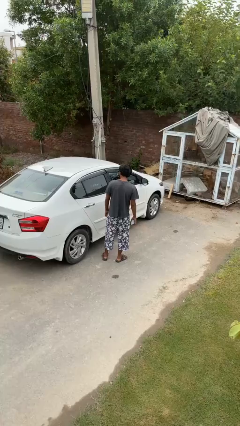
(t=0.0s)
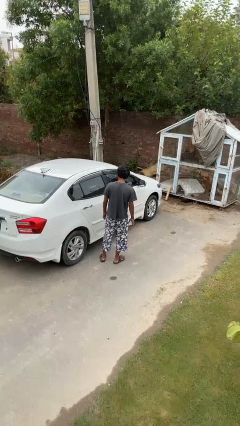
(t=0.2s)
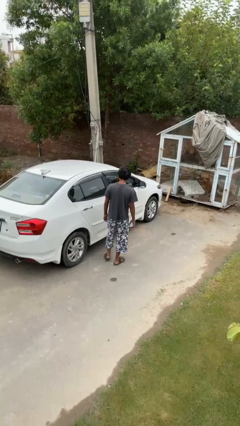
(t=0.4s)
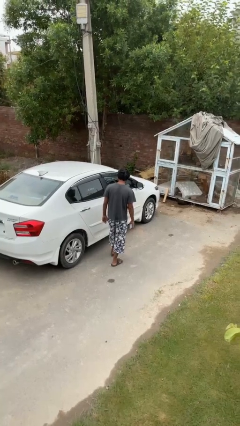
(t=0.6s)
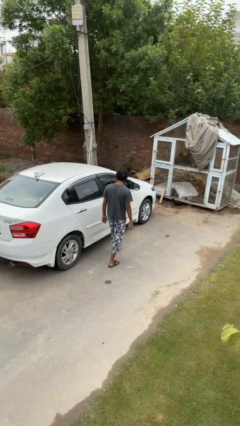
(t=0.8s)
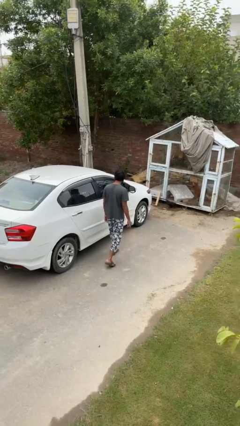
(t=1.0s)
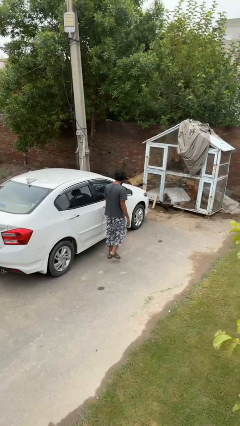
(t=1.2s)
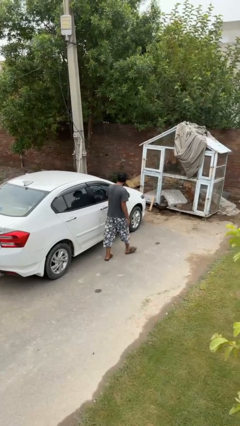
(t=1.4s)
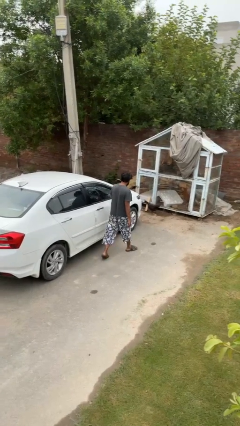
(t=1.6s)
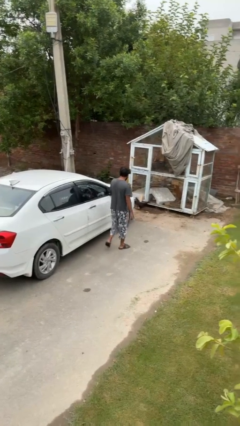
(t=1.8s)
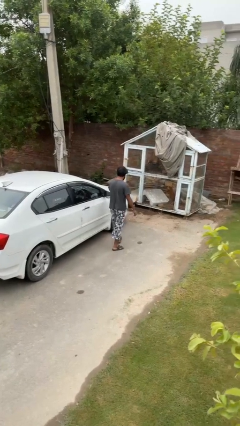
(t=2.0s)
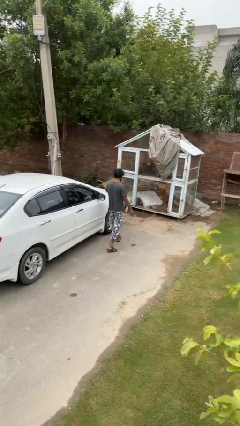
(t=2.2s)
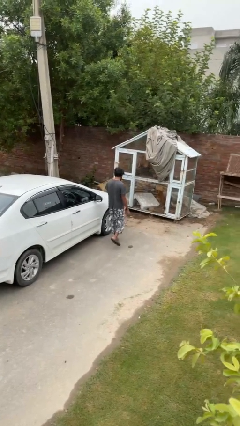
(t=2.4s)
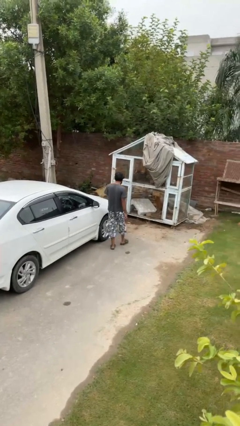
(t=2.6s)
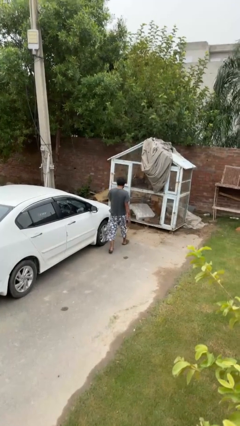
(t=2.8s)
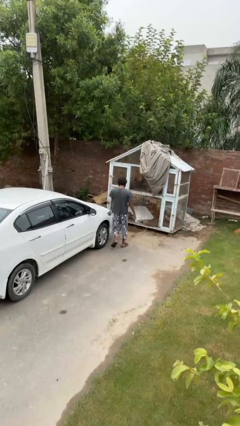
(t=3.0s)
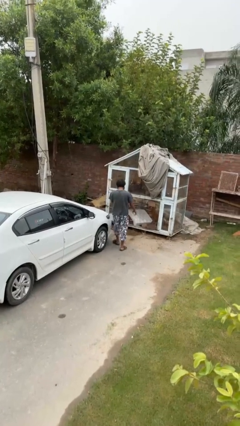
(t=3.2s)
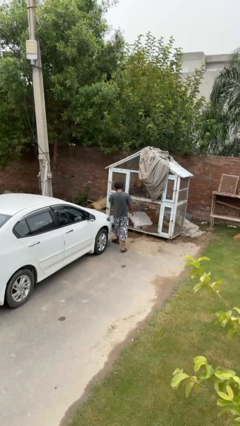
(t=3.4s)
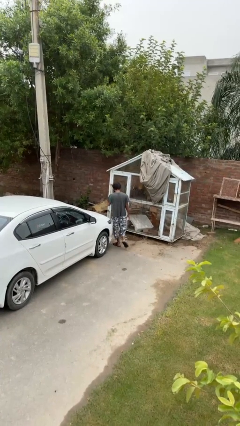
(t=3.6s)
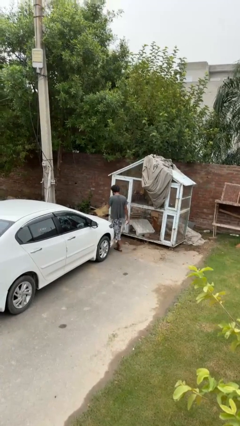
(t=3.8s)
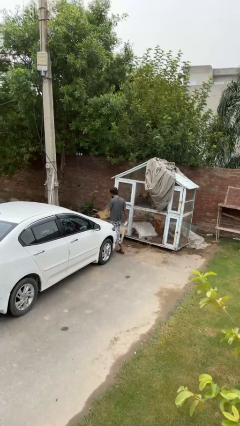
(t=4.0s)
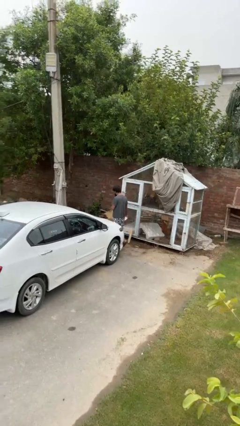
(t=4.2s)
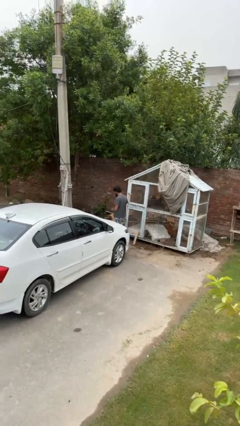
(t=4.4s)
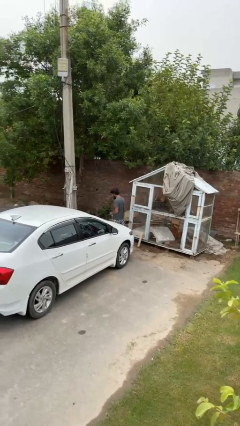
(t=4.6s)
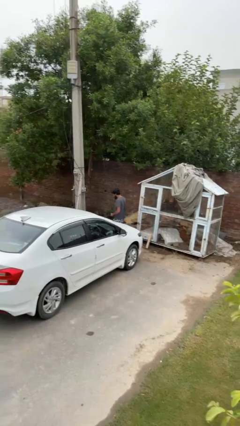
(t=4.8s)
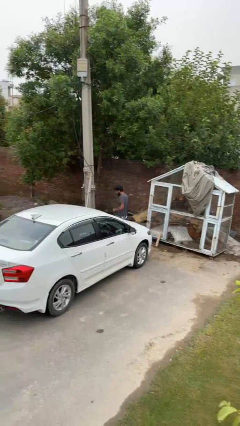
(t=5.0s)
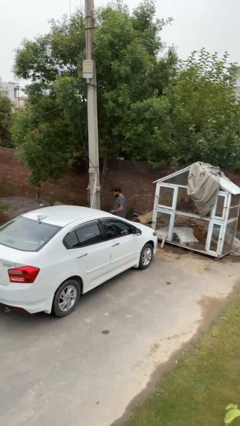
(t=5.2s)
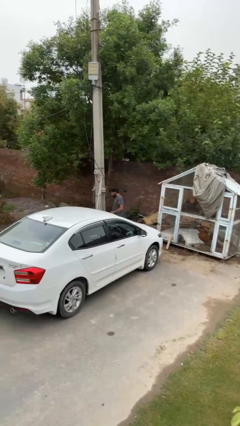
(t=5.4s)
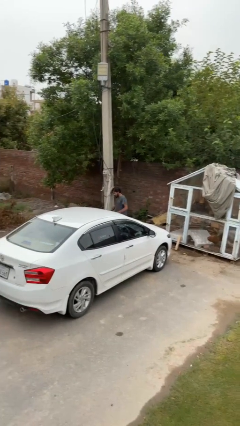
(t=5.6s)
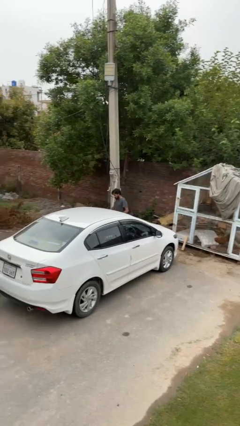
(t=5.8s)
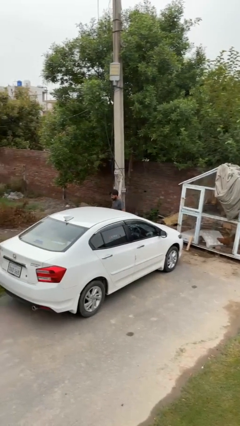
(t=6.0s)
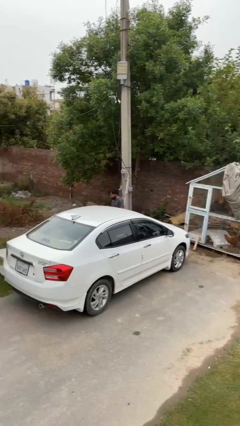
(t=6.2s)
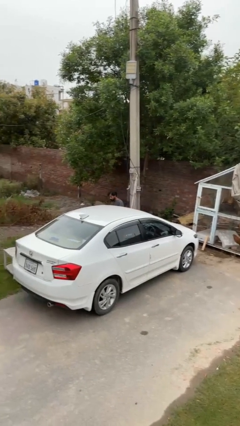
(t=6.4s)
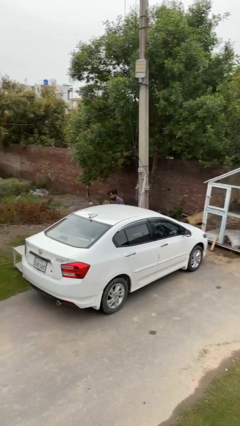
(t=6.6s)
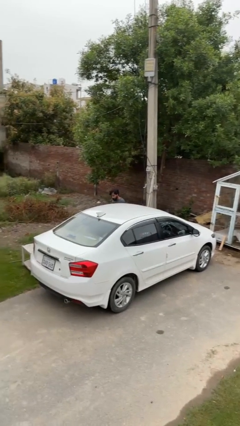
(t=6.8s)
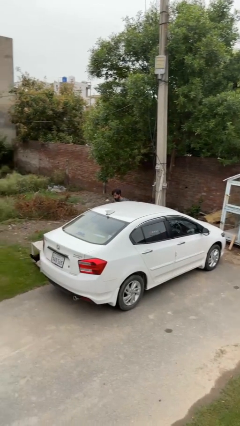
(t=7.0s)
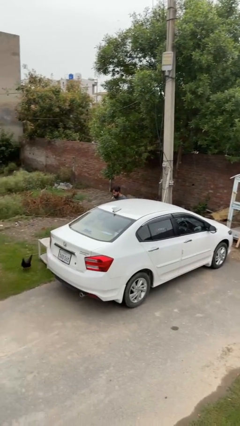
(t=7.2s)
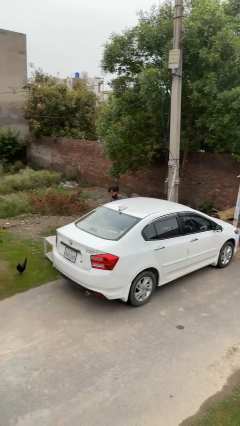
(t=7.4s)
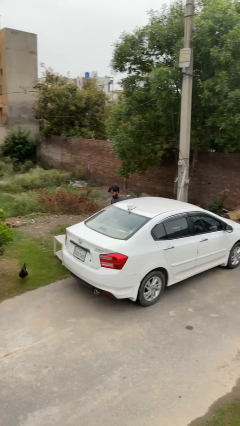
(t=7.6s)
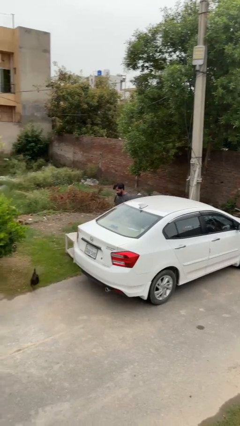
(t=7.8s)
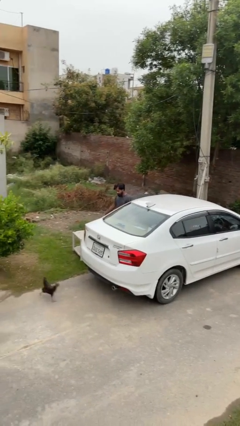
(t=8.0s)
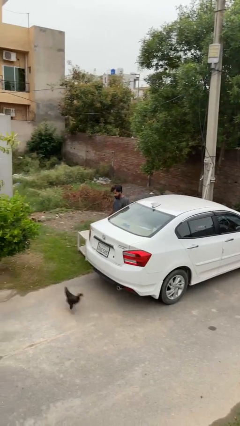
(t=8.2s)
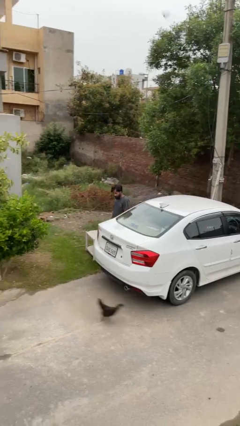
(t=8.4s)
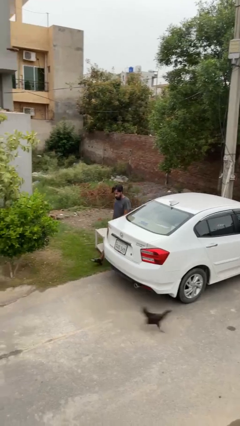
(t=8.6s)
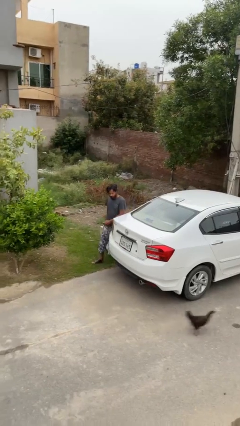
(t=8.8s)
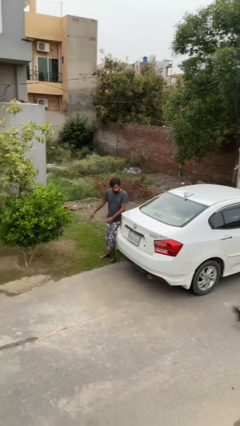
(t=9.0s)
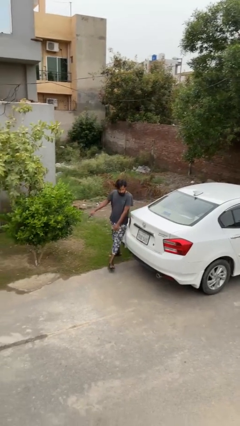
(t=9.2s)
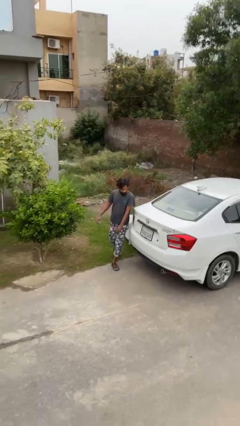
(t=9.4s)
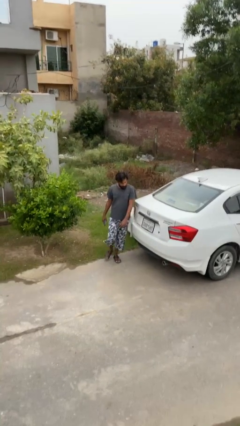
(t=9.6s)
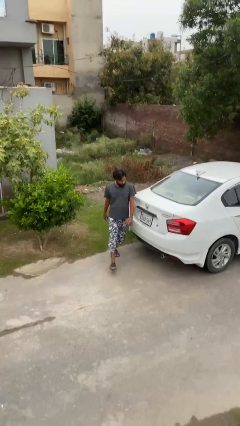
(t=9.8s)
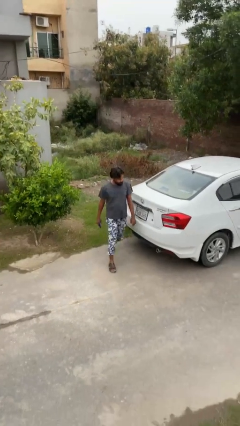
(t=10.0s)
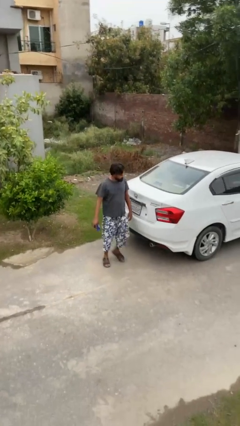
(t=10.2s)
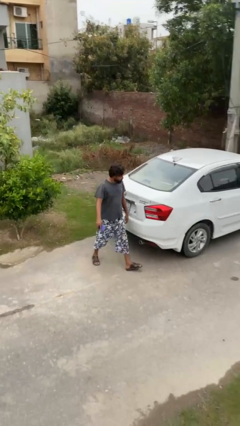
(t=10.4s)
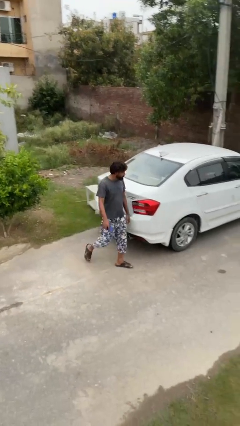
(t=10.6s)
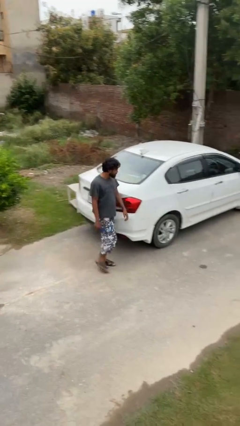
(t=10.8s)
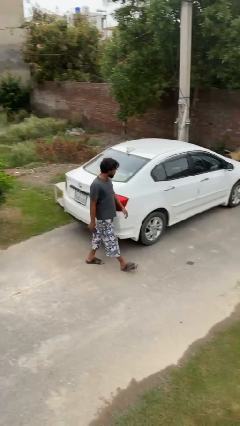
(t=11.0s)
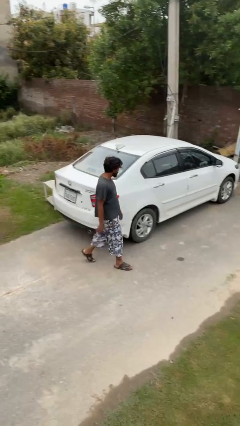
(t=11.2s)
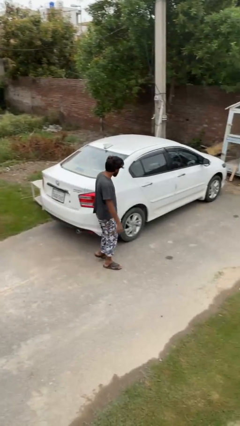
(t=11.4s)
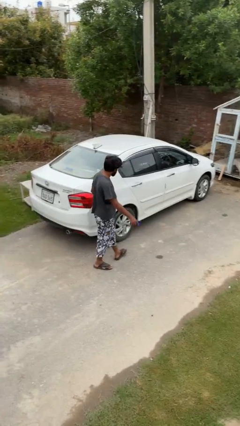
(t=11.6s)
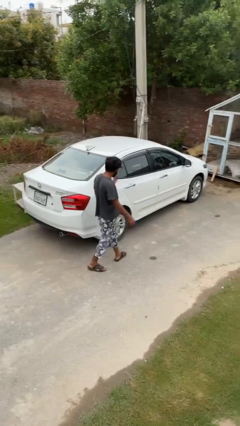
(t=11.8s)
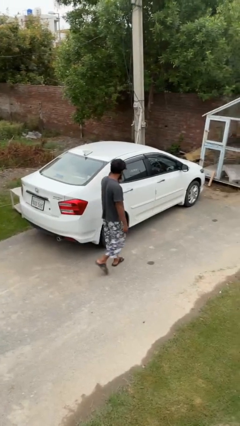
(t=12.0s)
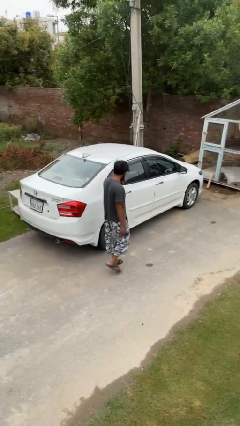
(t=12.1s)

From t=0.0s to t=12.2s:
person walks around car

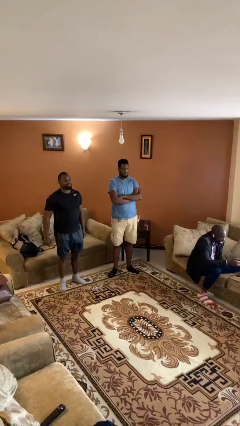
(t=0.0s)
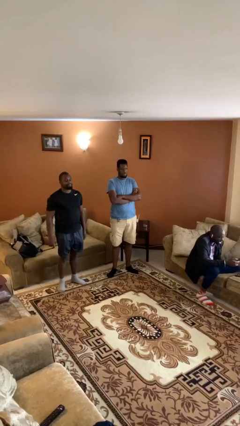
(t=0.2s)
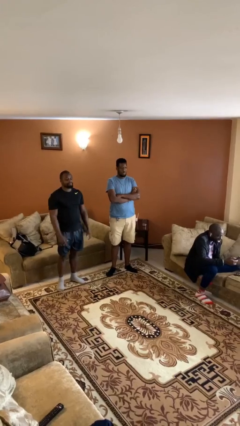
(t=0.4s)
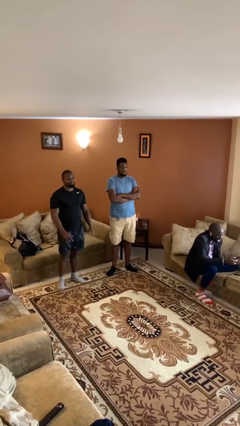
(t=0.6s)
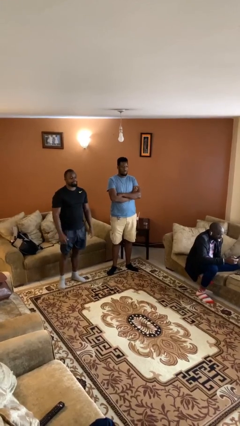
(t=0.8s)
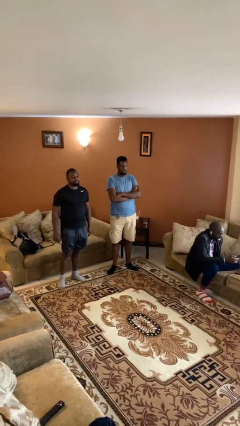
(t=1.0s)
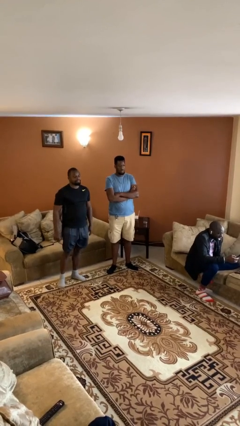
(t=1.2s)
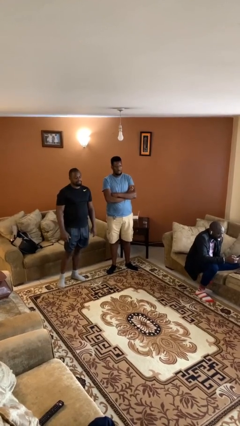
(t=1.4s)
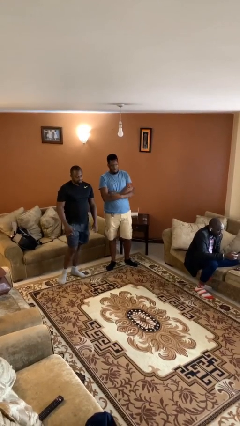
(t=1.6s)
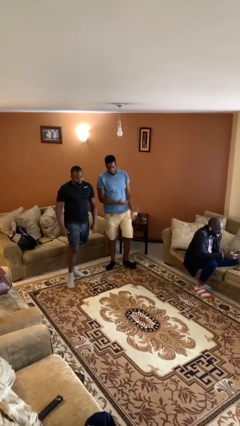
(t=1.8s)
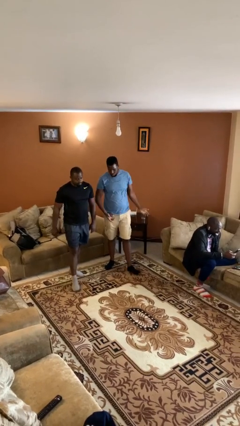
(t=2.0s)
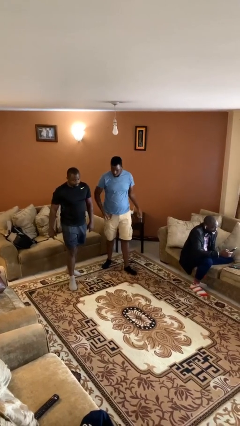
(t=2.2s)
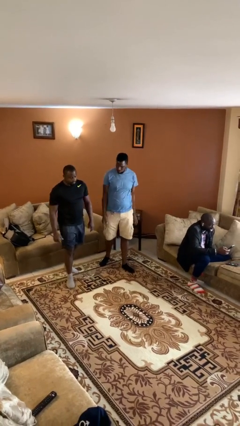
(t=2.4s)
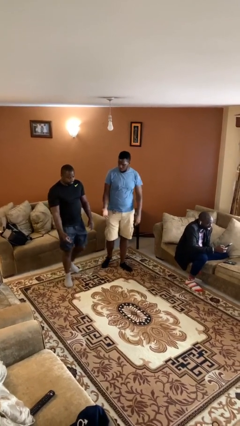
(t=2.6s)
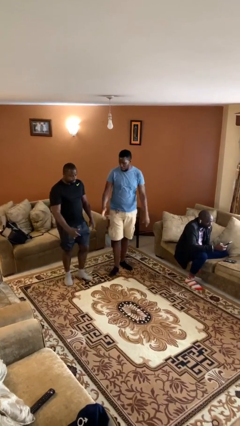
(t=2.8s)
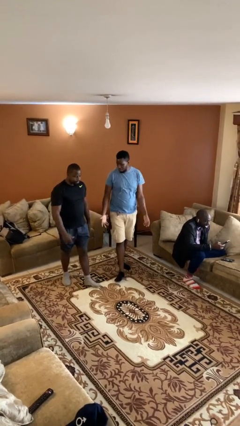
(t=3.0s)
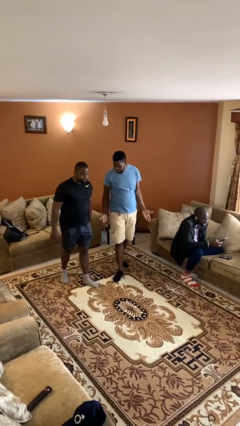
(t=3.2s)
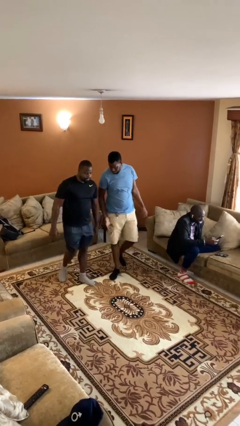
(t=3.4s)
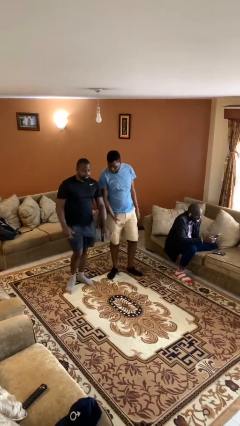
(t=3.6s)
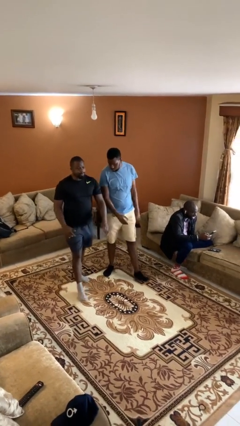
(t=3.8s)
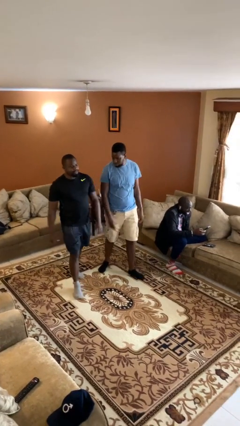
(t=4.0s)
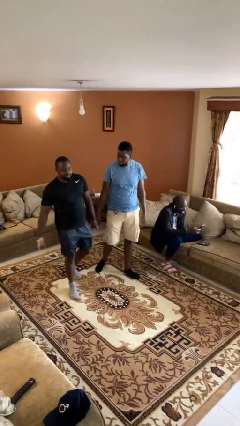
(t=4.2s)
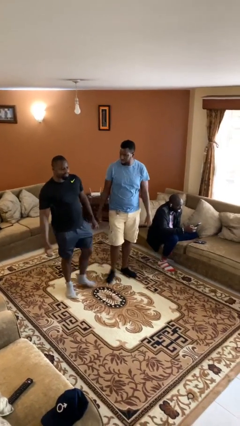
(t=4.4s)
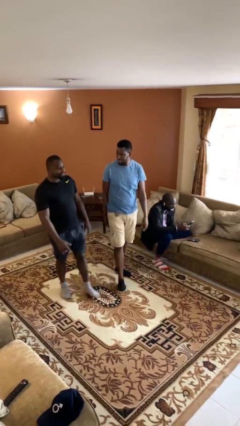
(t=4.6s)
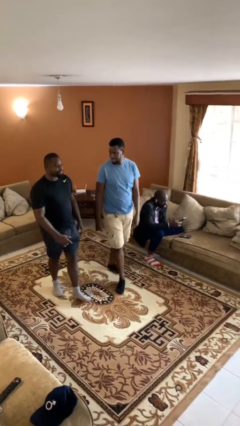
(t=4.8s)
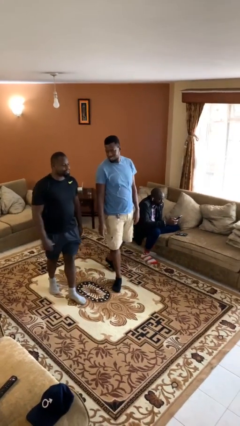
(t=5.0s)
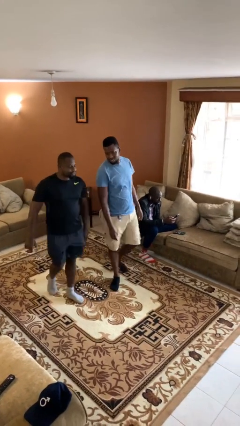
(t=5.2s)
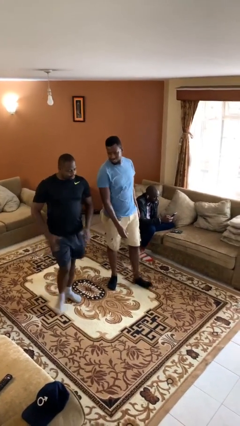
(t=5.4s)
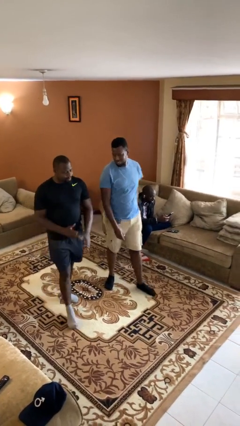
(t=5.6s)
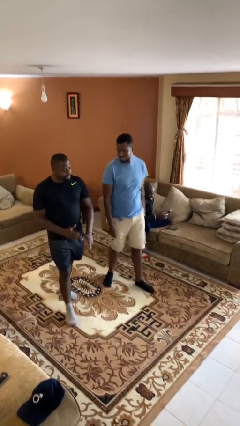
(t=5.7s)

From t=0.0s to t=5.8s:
person talks to person
